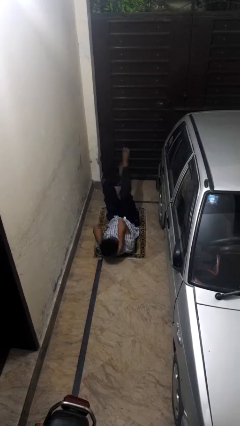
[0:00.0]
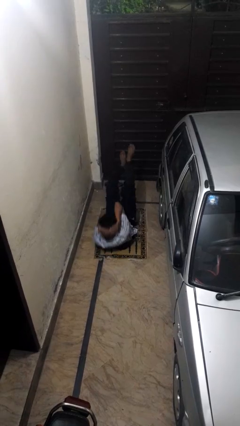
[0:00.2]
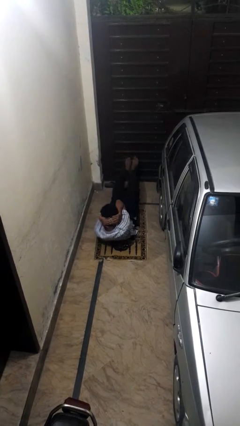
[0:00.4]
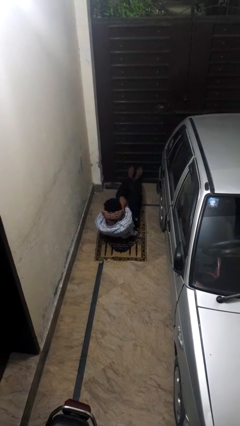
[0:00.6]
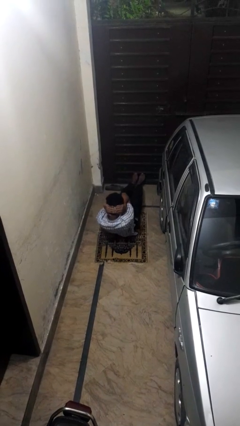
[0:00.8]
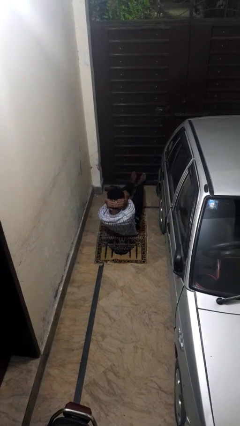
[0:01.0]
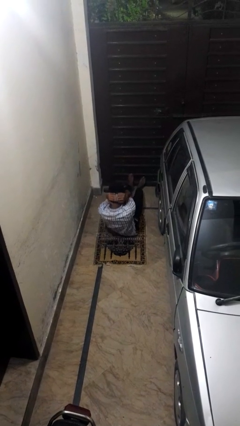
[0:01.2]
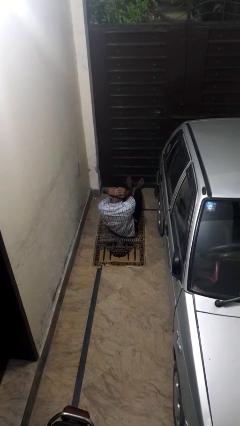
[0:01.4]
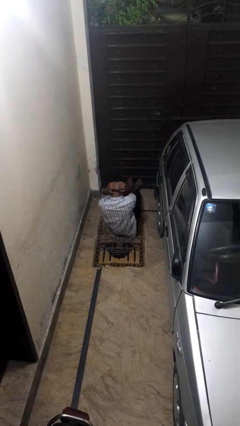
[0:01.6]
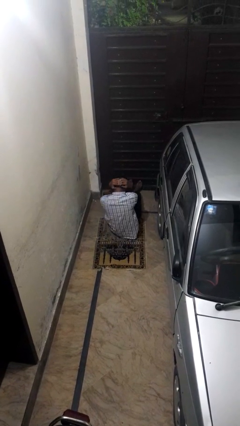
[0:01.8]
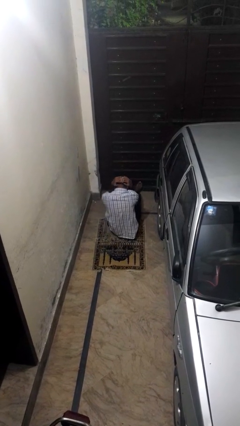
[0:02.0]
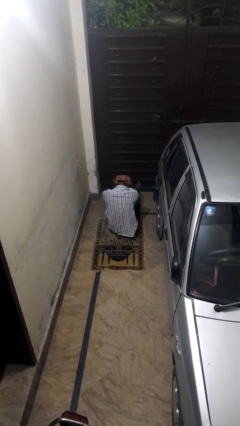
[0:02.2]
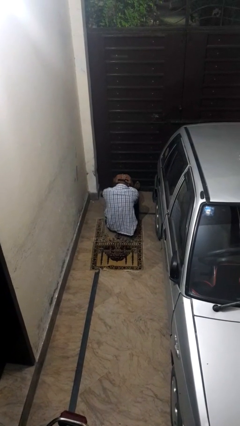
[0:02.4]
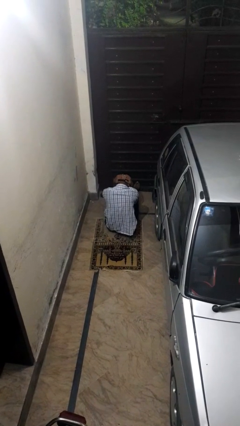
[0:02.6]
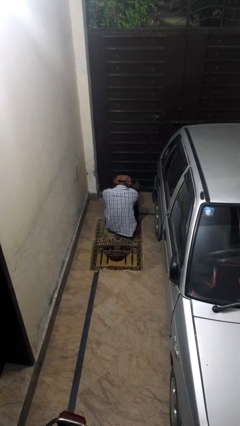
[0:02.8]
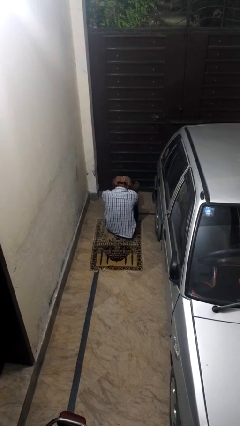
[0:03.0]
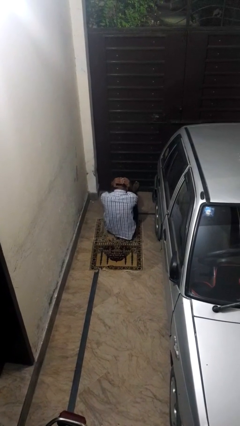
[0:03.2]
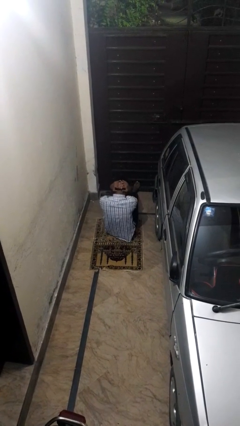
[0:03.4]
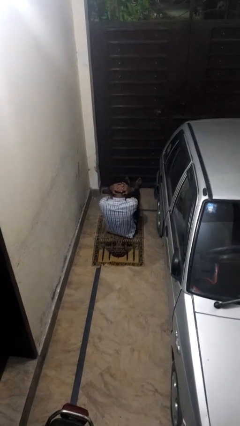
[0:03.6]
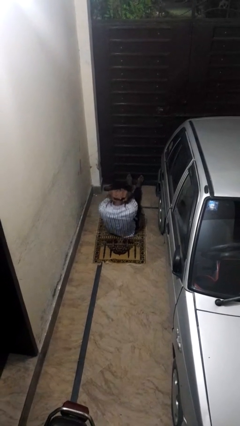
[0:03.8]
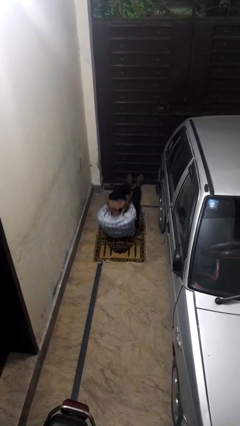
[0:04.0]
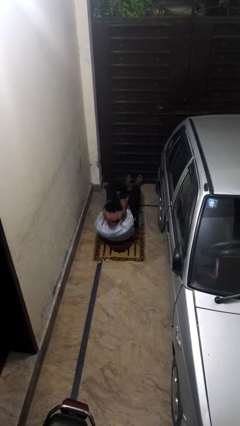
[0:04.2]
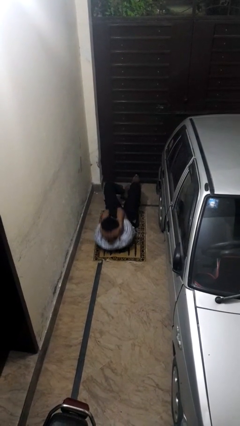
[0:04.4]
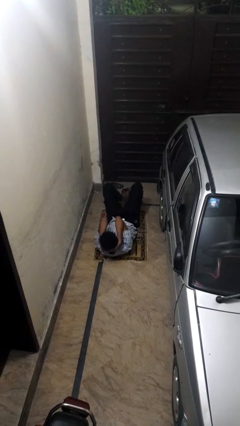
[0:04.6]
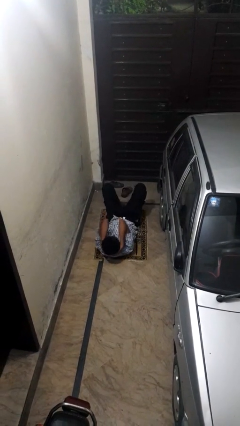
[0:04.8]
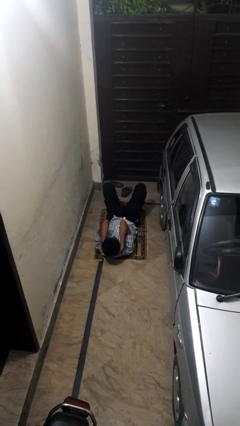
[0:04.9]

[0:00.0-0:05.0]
person exercises with situp

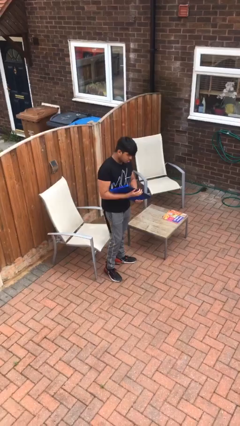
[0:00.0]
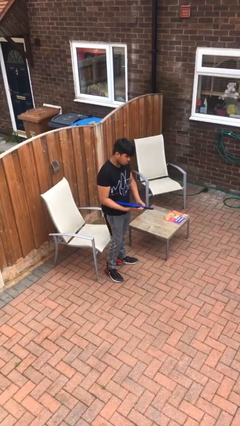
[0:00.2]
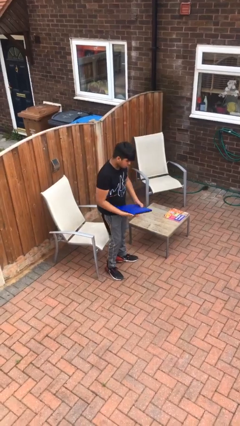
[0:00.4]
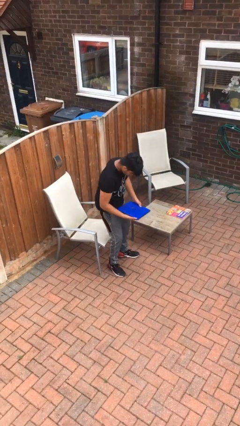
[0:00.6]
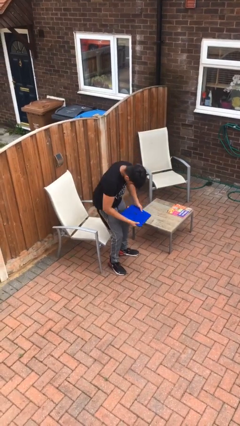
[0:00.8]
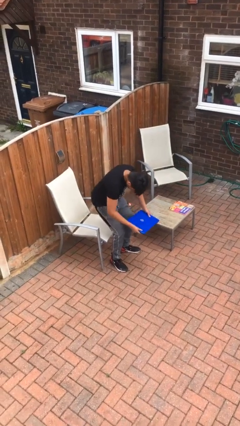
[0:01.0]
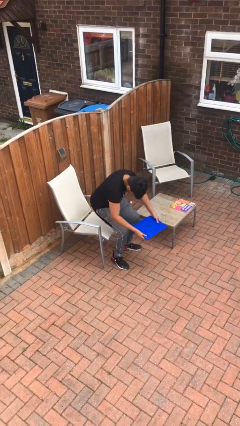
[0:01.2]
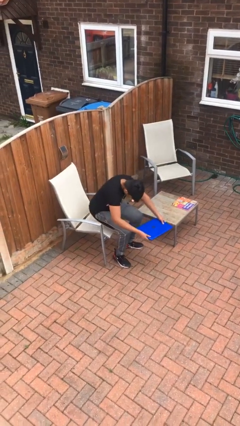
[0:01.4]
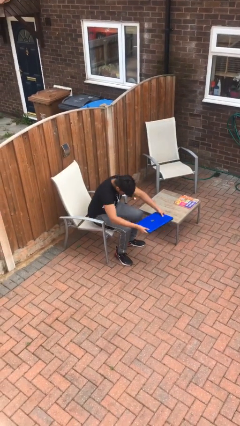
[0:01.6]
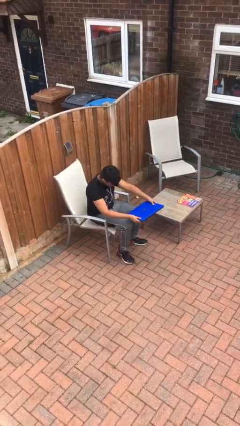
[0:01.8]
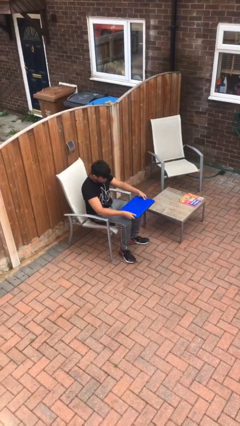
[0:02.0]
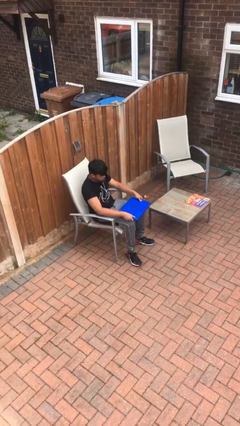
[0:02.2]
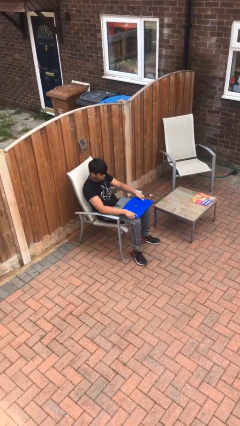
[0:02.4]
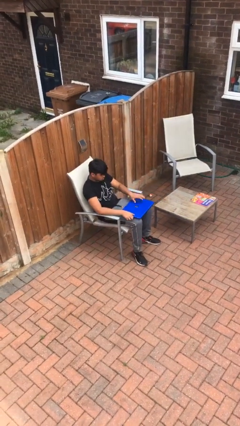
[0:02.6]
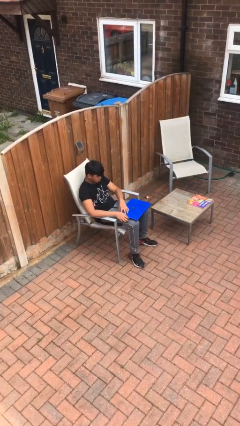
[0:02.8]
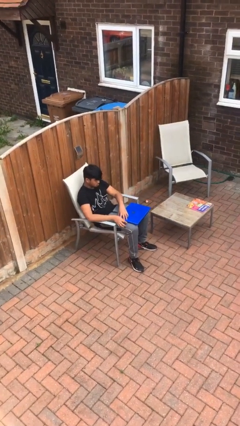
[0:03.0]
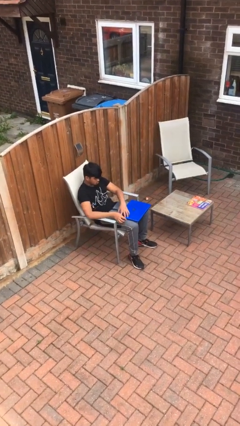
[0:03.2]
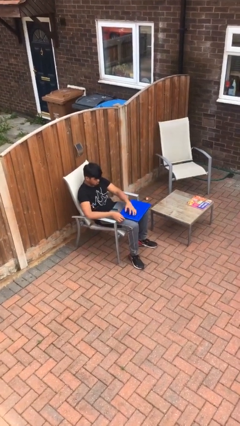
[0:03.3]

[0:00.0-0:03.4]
person sits down

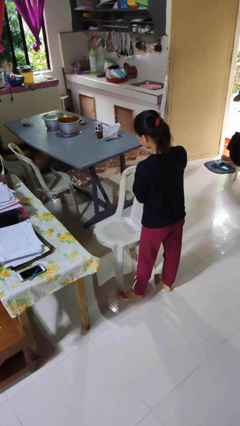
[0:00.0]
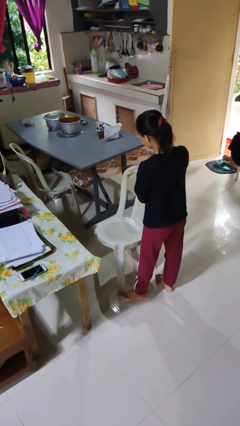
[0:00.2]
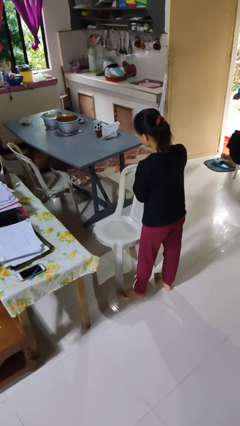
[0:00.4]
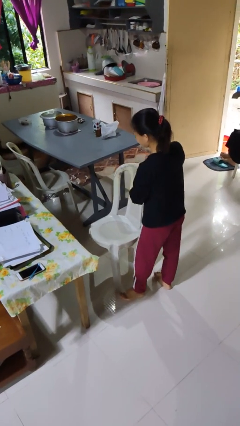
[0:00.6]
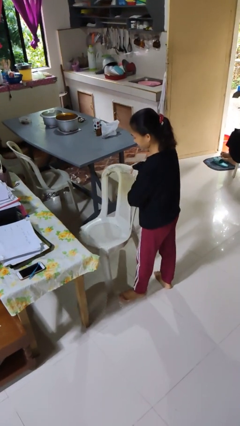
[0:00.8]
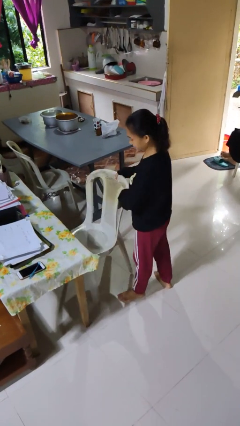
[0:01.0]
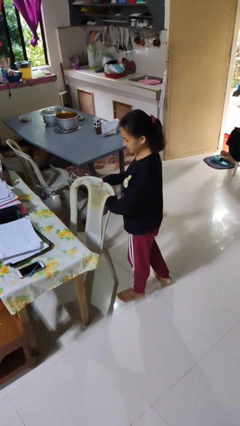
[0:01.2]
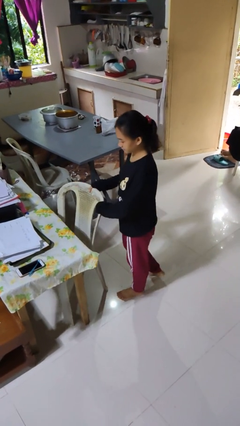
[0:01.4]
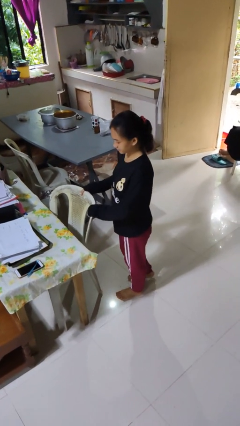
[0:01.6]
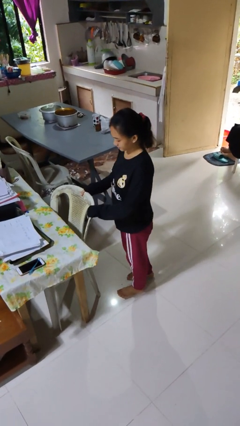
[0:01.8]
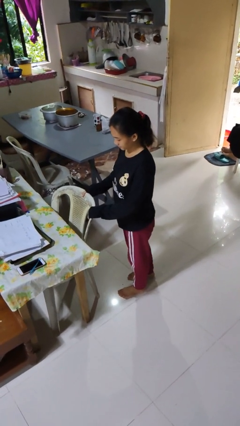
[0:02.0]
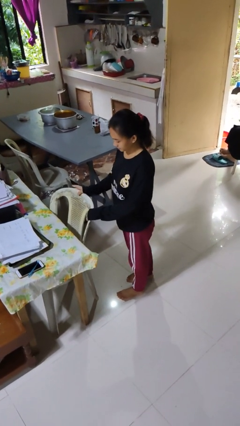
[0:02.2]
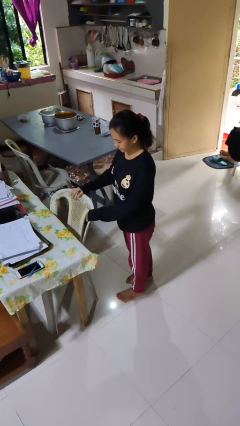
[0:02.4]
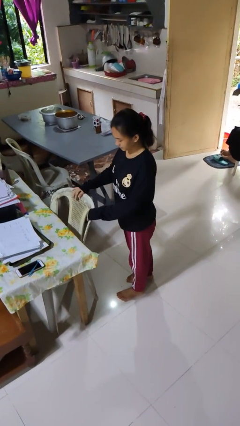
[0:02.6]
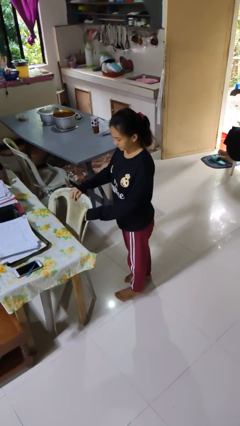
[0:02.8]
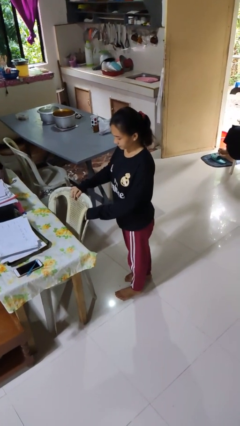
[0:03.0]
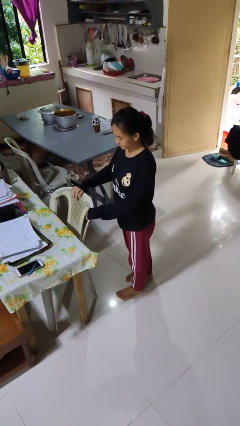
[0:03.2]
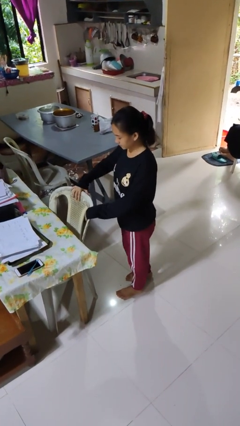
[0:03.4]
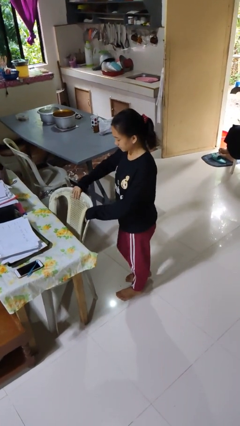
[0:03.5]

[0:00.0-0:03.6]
person pushes in chair

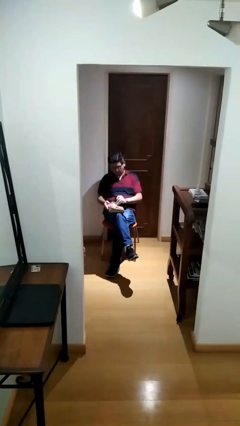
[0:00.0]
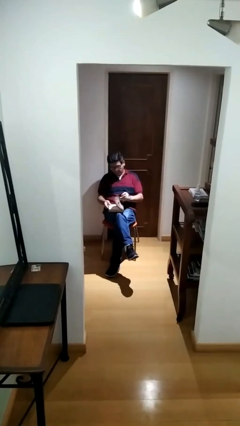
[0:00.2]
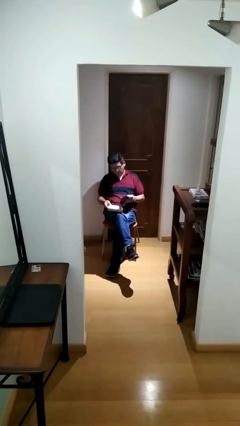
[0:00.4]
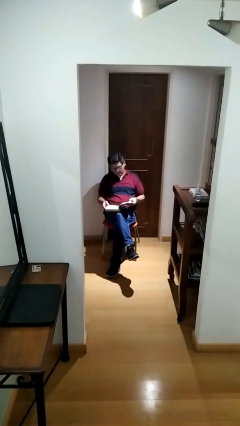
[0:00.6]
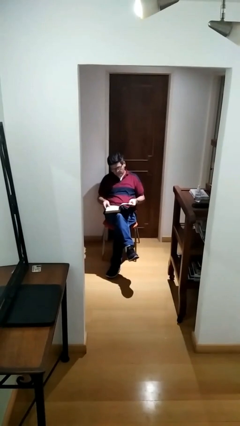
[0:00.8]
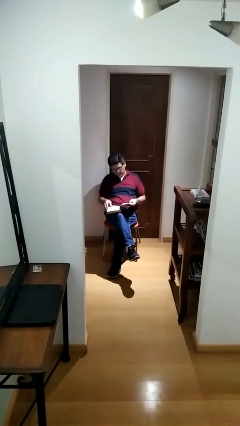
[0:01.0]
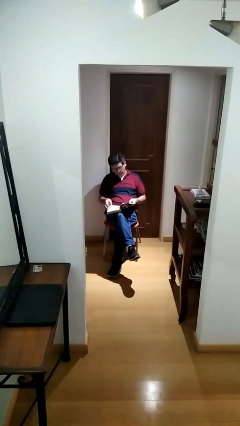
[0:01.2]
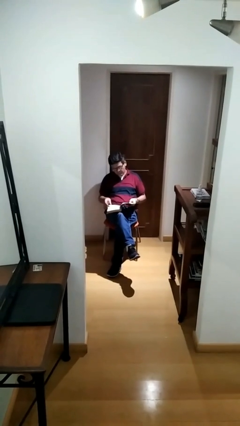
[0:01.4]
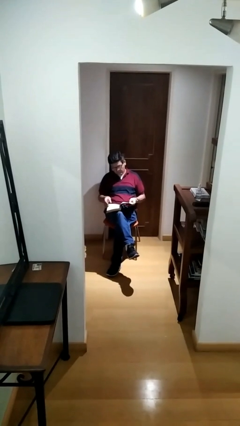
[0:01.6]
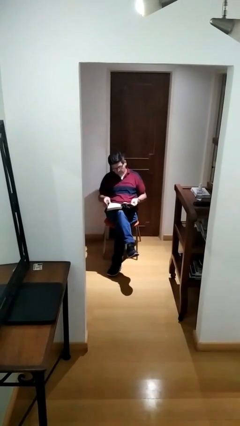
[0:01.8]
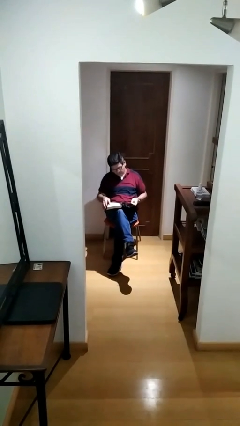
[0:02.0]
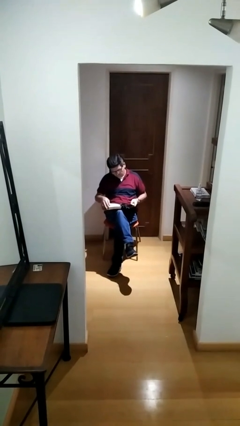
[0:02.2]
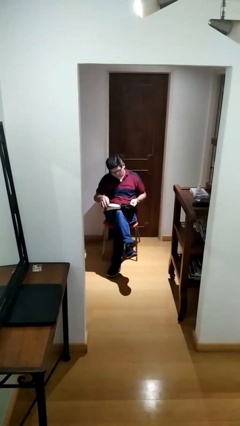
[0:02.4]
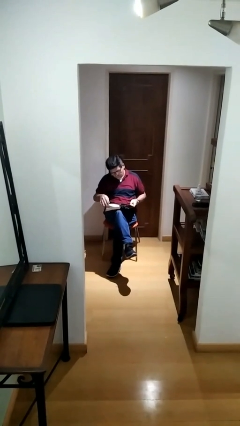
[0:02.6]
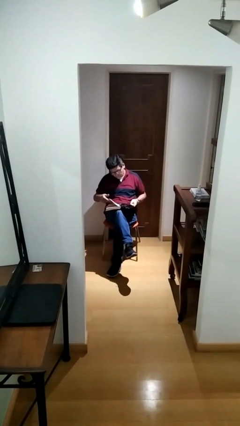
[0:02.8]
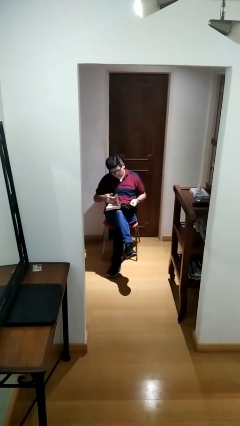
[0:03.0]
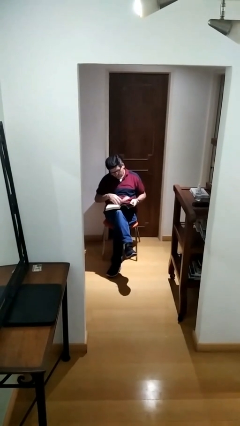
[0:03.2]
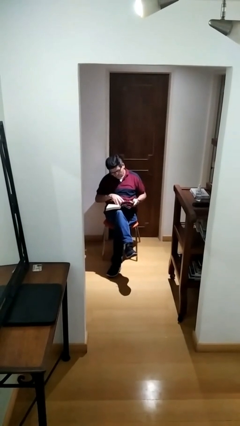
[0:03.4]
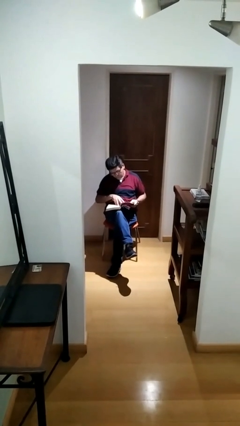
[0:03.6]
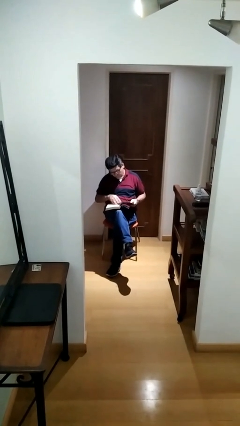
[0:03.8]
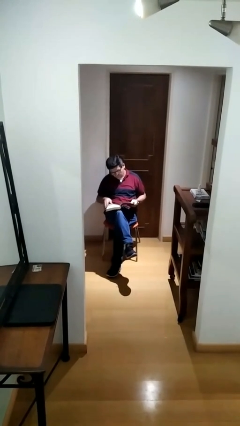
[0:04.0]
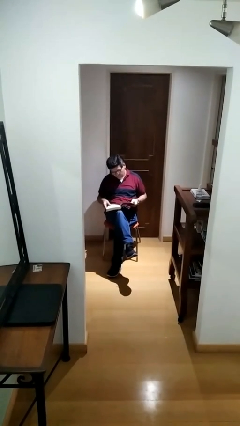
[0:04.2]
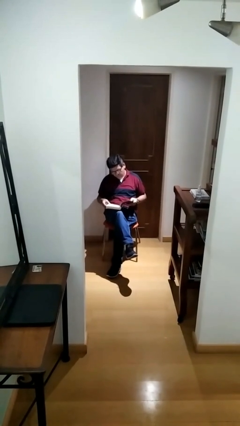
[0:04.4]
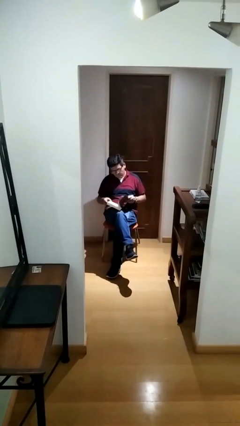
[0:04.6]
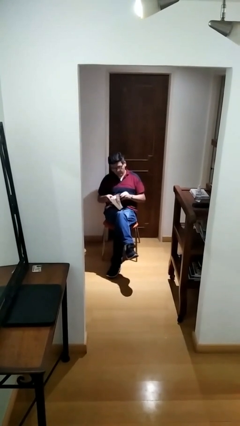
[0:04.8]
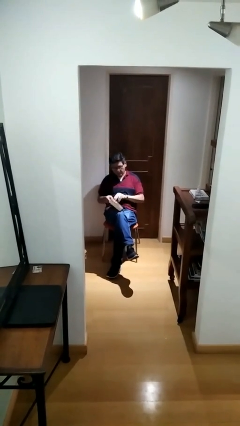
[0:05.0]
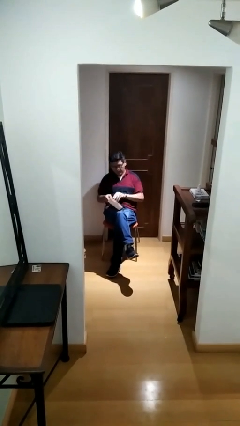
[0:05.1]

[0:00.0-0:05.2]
person reads document

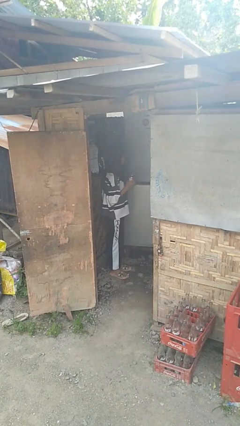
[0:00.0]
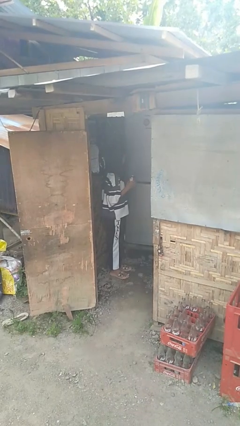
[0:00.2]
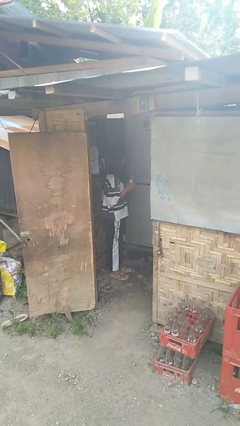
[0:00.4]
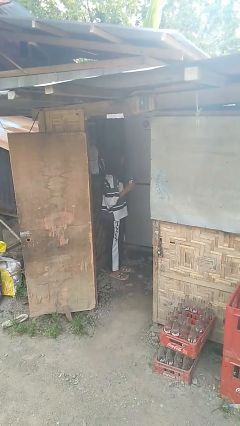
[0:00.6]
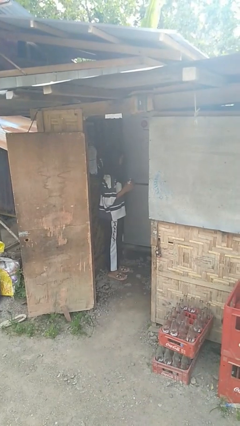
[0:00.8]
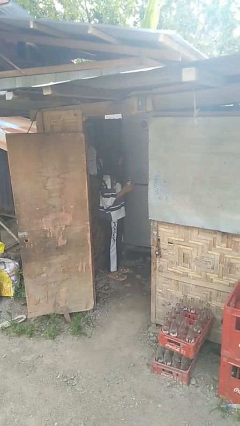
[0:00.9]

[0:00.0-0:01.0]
person closes refrigerator
